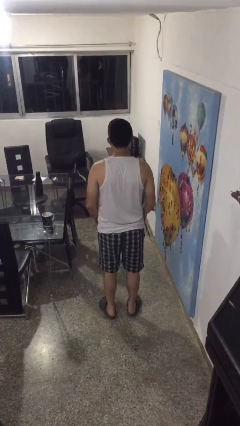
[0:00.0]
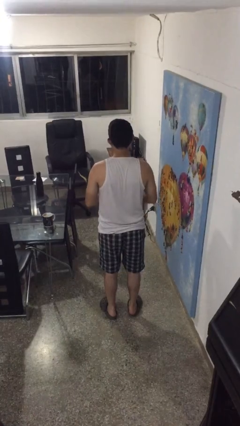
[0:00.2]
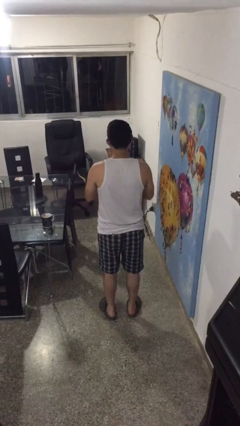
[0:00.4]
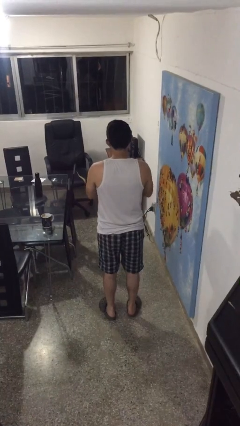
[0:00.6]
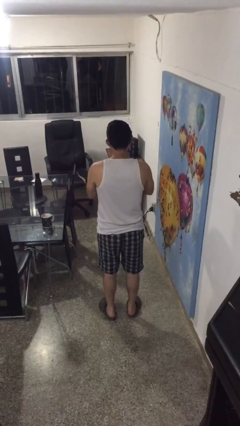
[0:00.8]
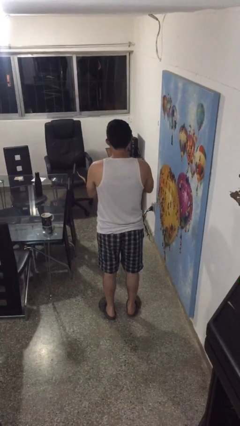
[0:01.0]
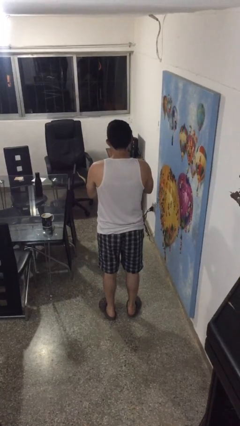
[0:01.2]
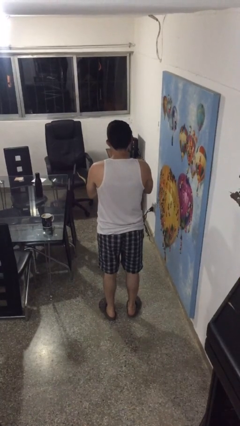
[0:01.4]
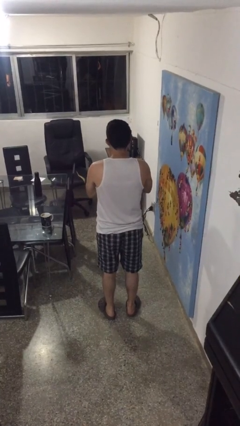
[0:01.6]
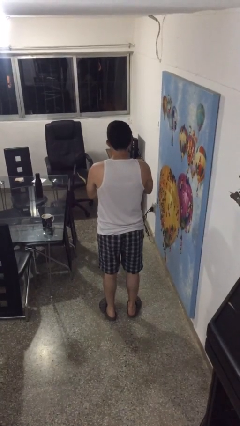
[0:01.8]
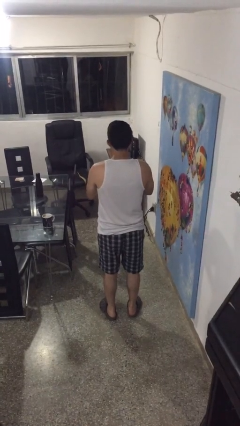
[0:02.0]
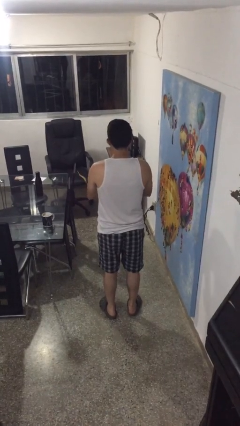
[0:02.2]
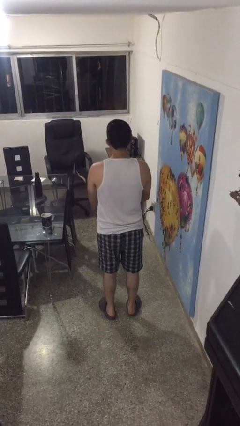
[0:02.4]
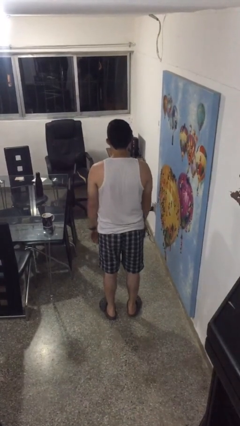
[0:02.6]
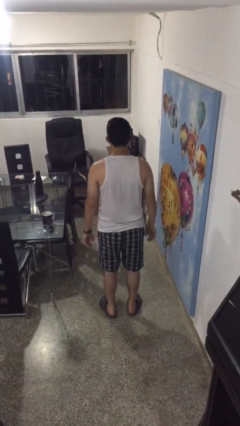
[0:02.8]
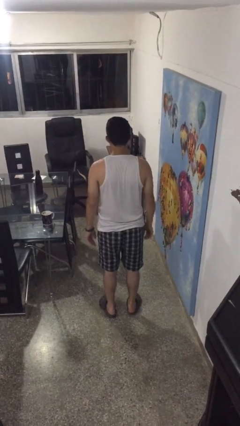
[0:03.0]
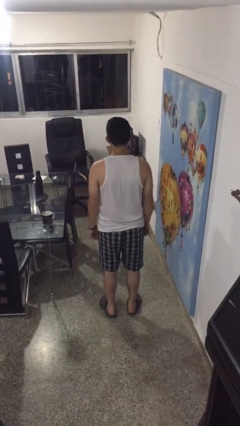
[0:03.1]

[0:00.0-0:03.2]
person cracks knuckles

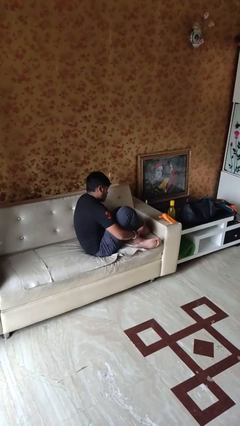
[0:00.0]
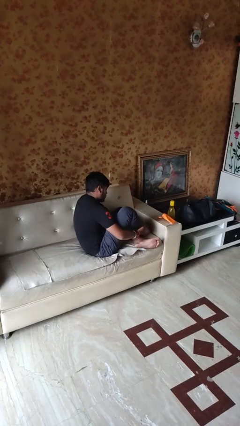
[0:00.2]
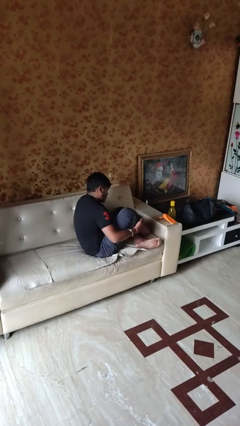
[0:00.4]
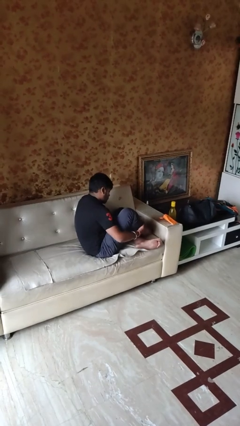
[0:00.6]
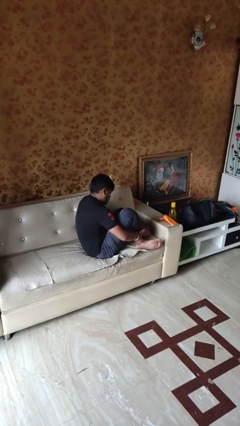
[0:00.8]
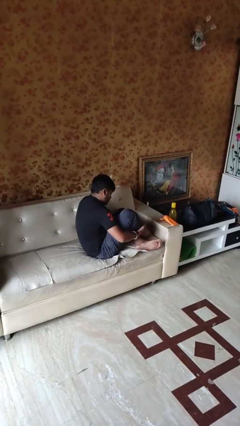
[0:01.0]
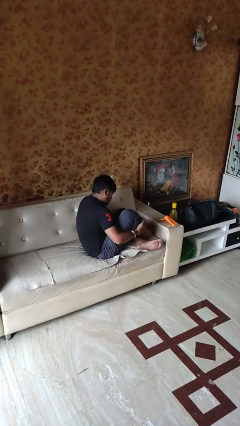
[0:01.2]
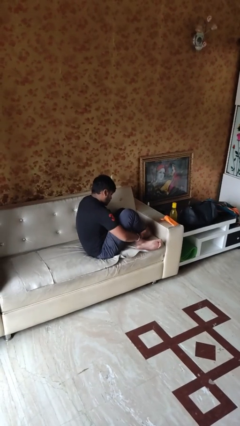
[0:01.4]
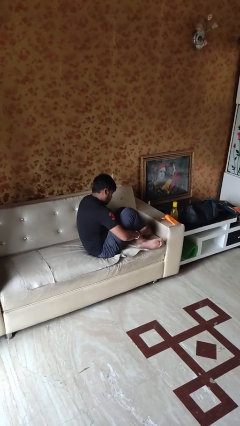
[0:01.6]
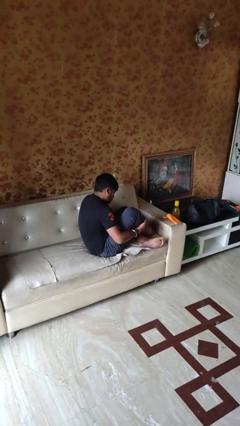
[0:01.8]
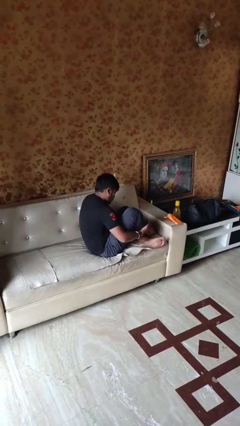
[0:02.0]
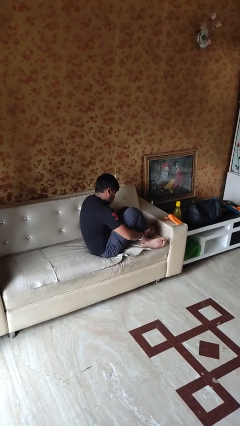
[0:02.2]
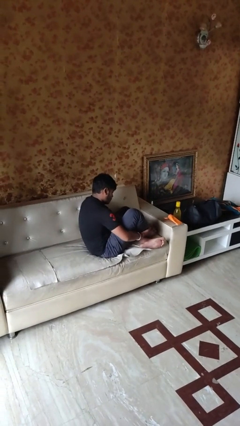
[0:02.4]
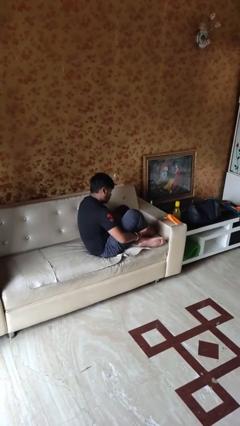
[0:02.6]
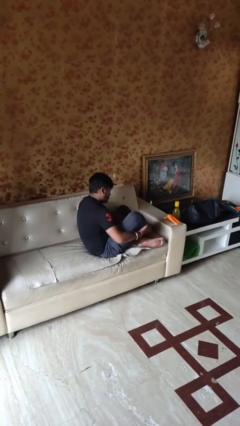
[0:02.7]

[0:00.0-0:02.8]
person applies sunscreen

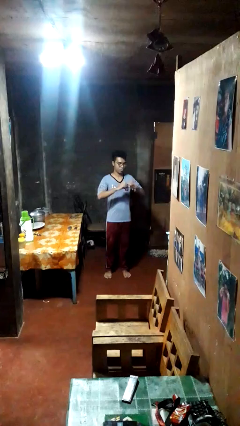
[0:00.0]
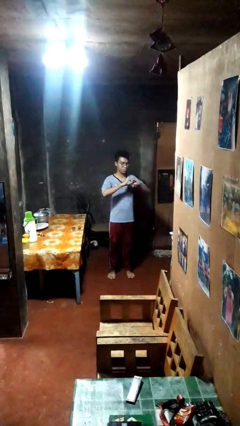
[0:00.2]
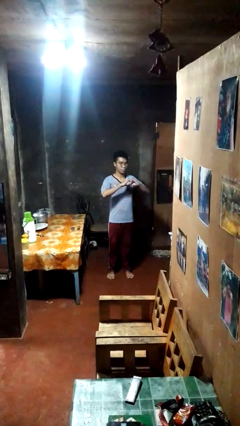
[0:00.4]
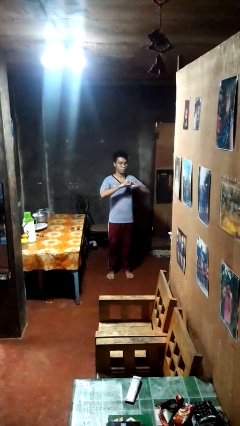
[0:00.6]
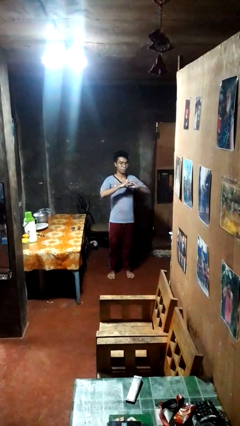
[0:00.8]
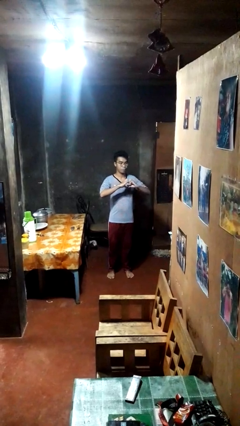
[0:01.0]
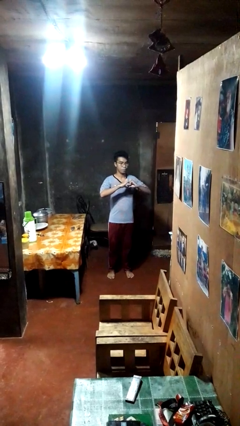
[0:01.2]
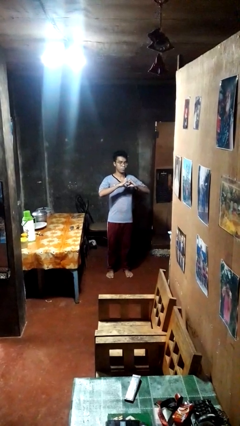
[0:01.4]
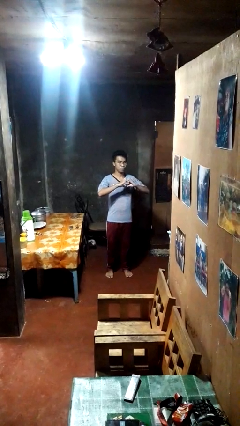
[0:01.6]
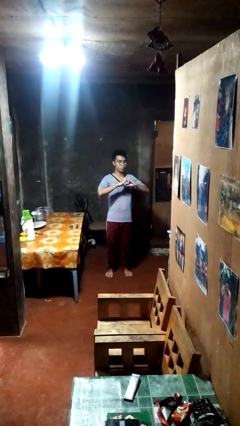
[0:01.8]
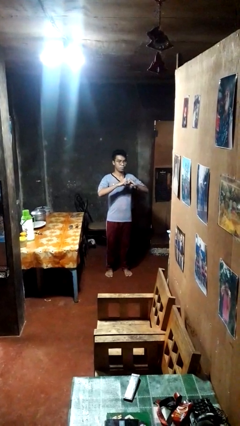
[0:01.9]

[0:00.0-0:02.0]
person gestures heart

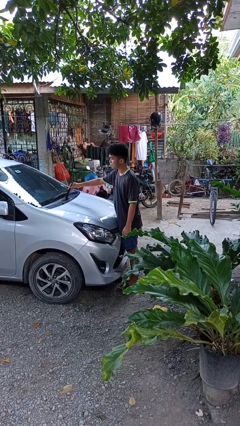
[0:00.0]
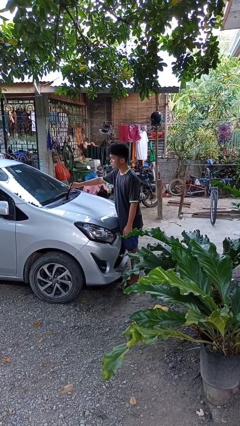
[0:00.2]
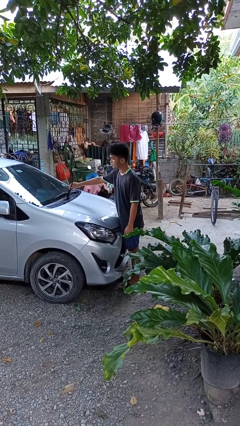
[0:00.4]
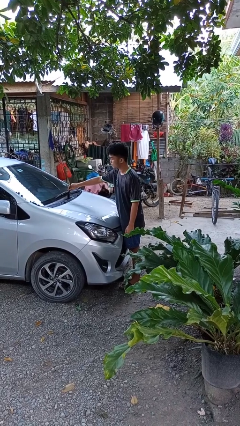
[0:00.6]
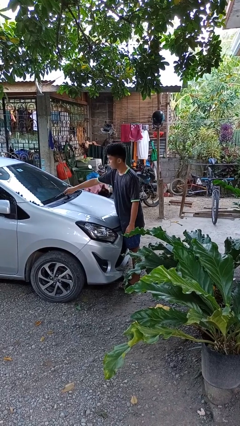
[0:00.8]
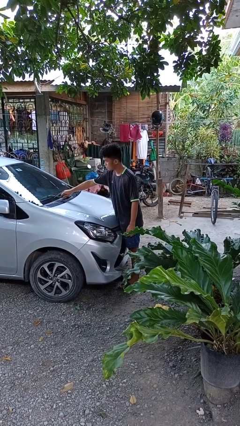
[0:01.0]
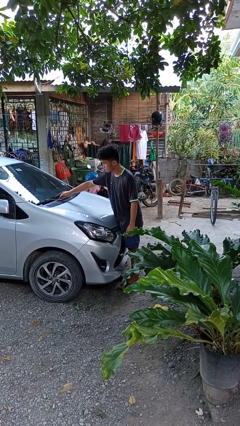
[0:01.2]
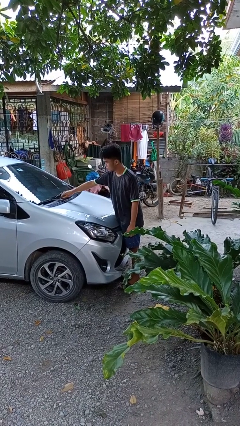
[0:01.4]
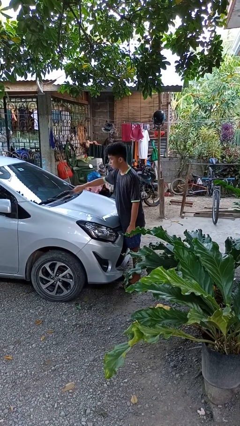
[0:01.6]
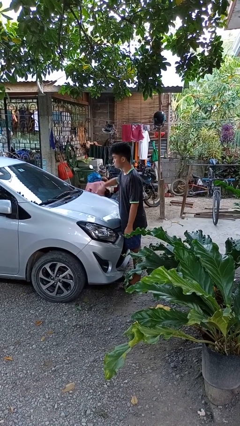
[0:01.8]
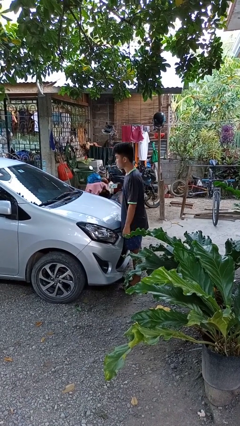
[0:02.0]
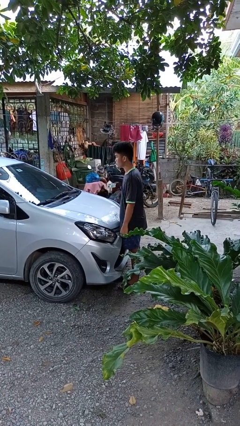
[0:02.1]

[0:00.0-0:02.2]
person flips down car wipers

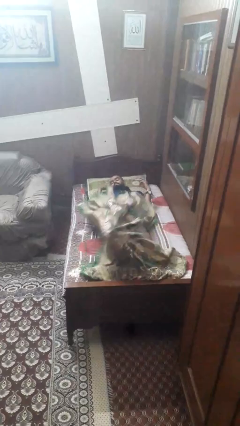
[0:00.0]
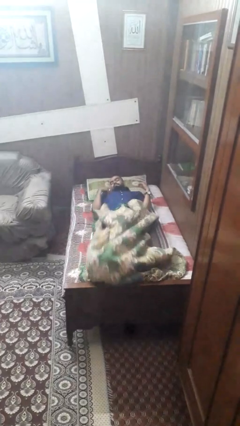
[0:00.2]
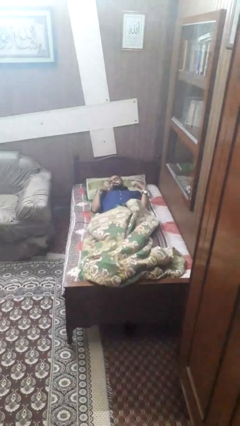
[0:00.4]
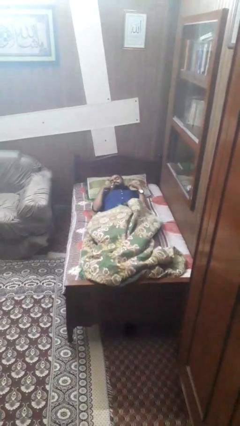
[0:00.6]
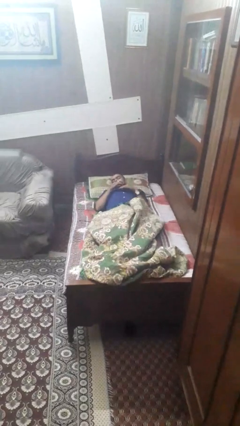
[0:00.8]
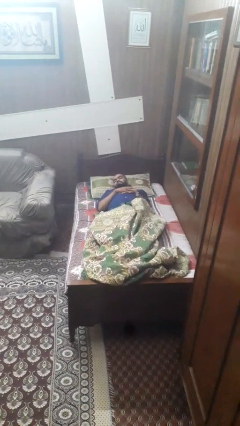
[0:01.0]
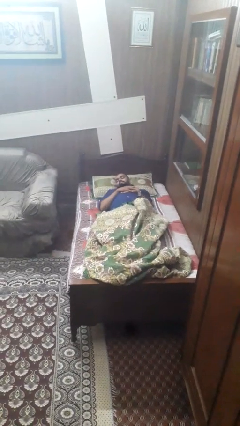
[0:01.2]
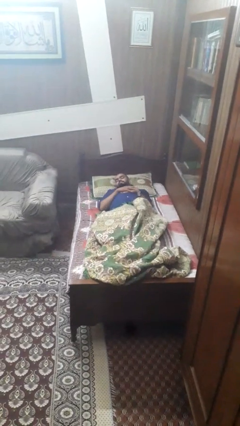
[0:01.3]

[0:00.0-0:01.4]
person uncovers with bedsheets

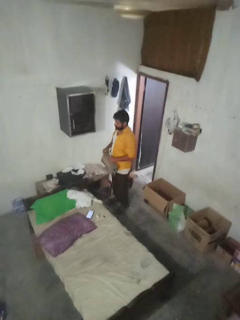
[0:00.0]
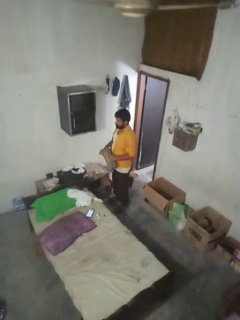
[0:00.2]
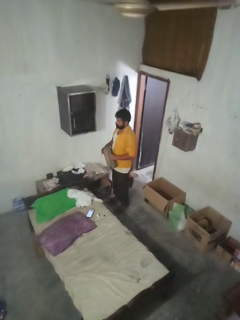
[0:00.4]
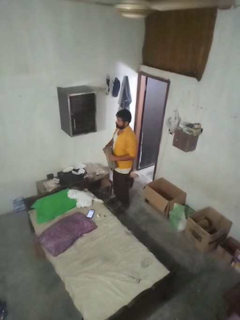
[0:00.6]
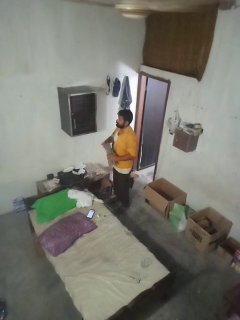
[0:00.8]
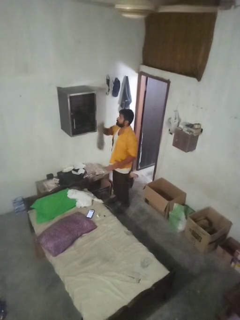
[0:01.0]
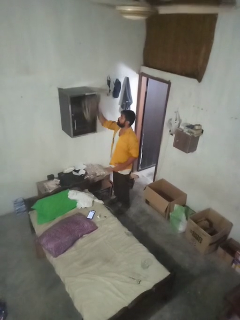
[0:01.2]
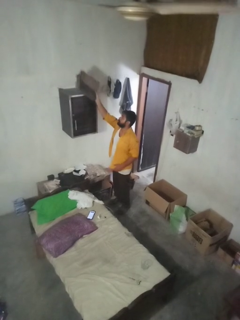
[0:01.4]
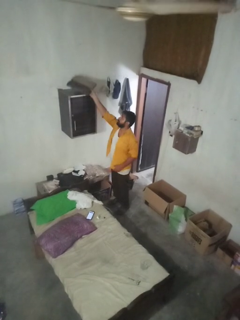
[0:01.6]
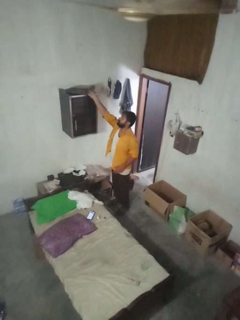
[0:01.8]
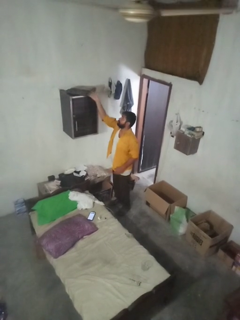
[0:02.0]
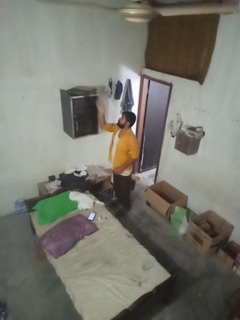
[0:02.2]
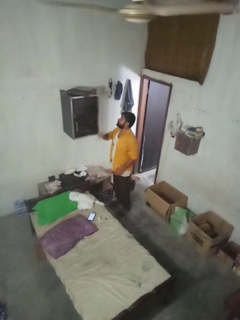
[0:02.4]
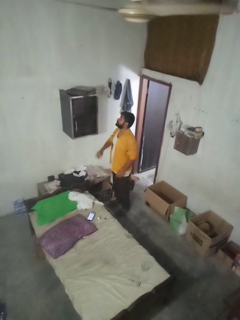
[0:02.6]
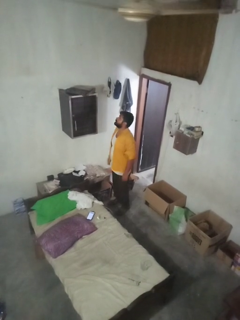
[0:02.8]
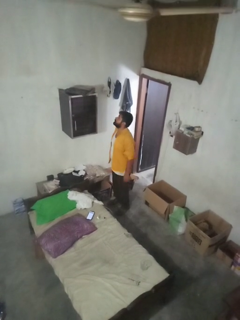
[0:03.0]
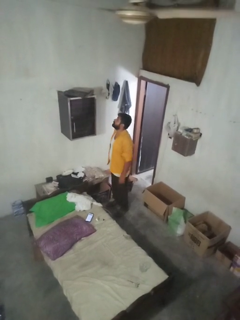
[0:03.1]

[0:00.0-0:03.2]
person puts down object on shelf

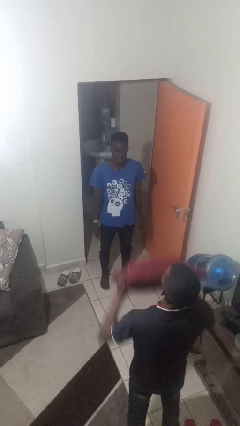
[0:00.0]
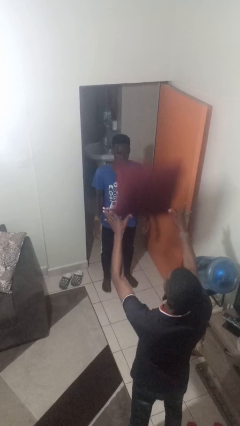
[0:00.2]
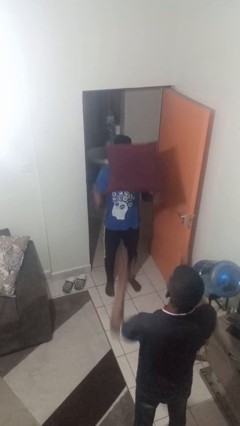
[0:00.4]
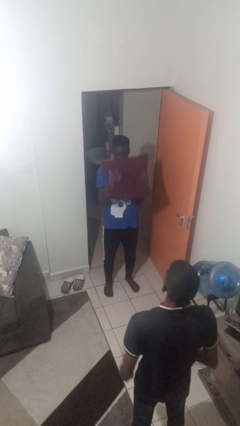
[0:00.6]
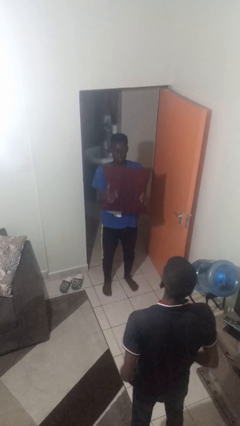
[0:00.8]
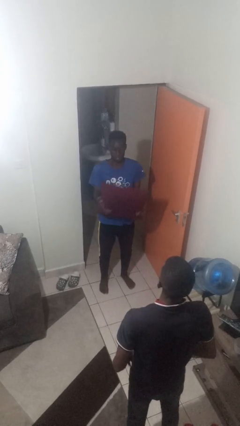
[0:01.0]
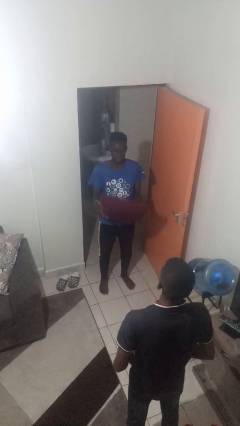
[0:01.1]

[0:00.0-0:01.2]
person catches object from person

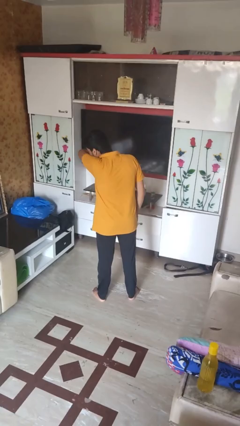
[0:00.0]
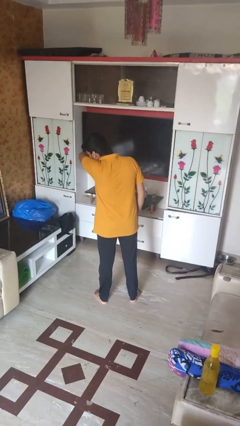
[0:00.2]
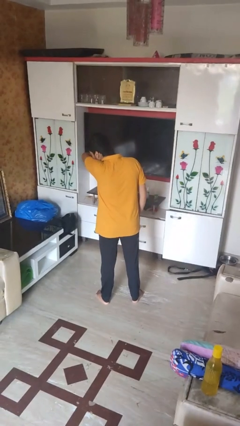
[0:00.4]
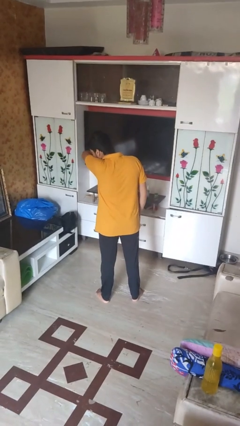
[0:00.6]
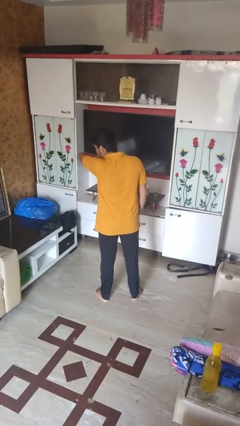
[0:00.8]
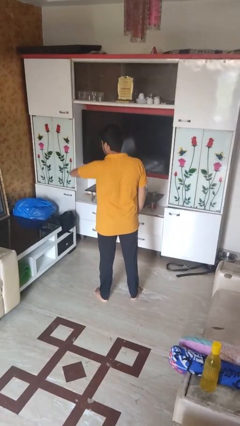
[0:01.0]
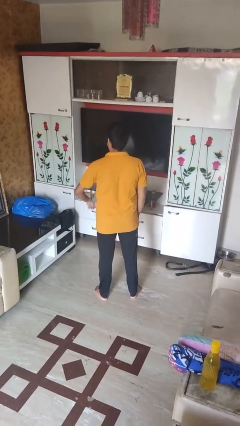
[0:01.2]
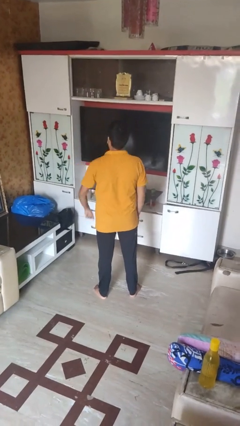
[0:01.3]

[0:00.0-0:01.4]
person sneezes into arm

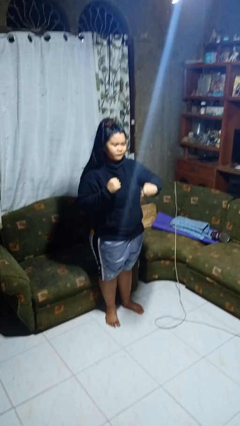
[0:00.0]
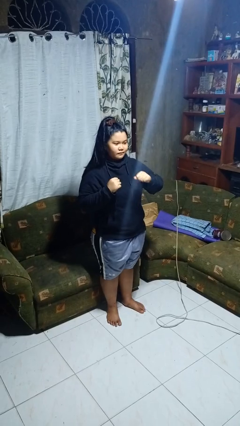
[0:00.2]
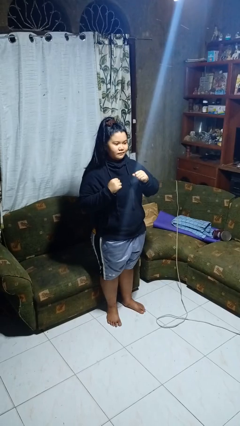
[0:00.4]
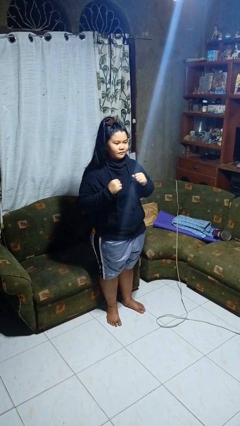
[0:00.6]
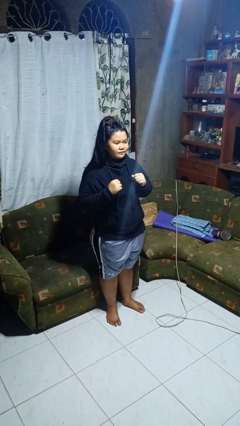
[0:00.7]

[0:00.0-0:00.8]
person punches
